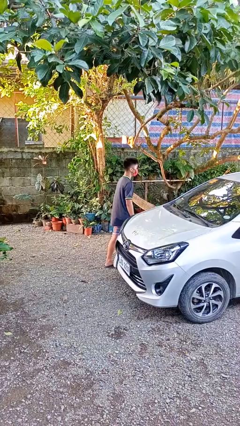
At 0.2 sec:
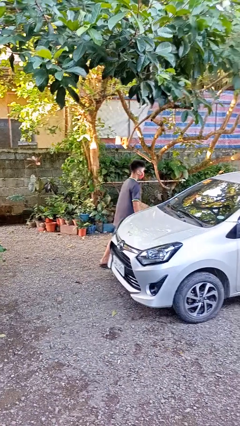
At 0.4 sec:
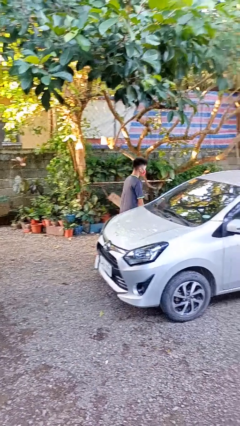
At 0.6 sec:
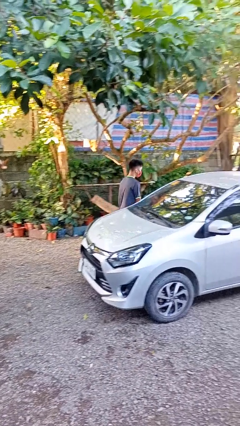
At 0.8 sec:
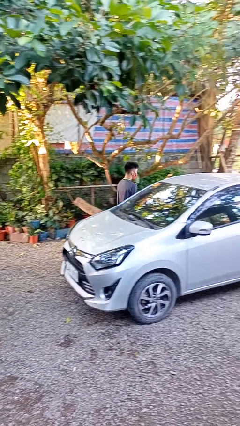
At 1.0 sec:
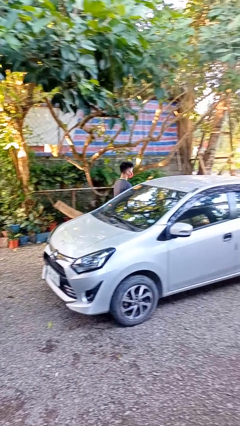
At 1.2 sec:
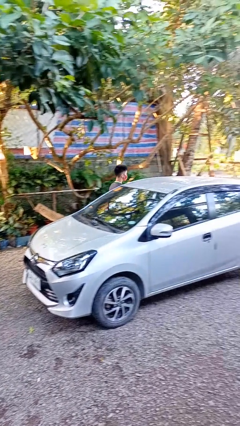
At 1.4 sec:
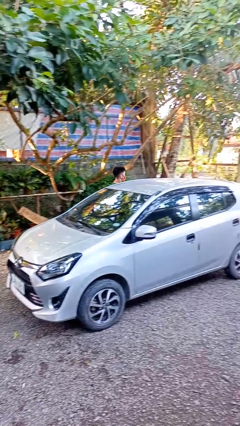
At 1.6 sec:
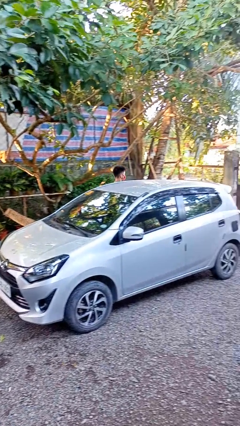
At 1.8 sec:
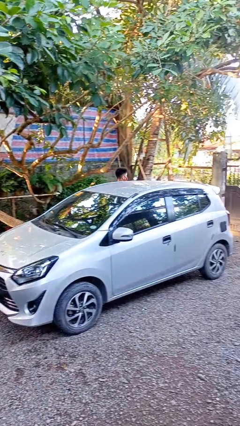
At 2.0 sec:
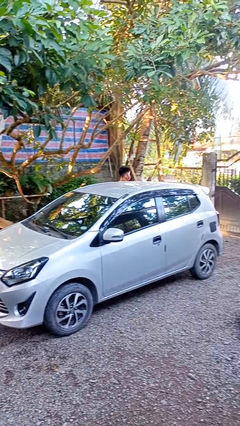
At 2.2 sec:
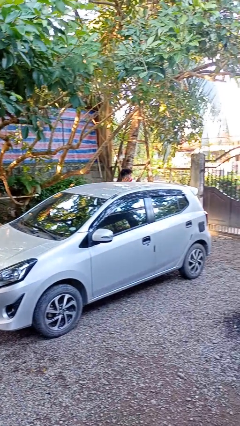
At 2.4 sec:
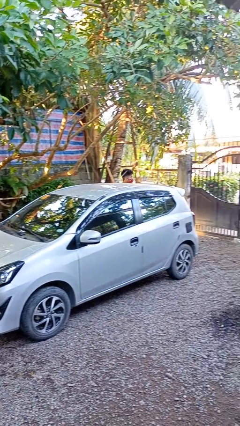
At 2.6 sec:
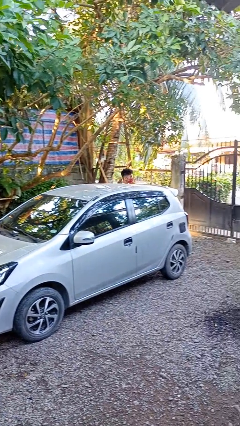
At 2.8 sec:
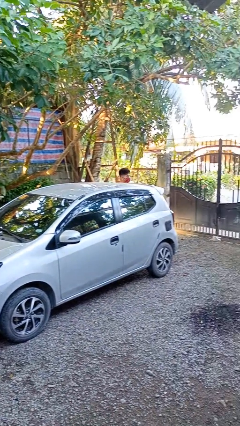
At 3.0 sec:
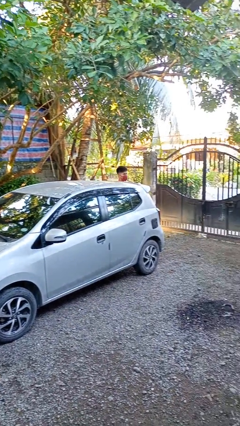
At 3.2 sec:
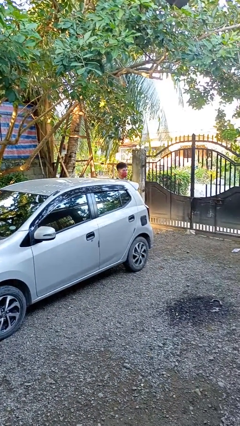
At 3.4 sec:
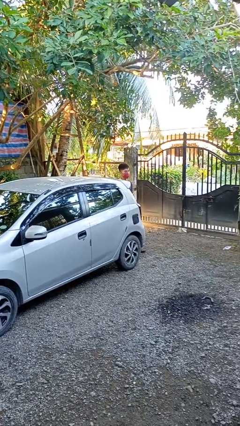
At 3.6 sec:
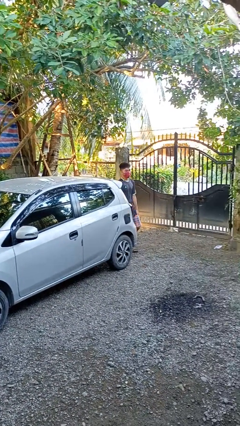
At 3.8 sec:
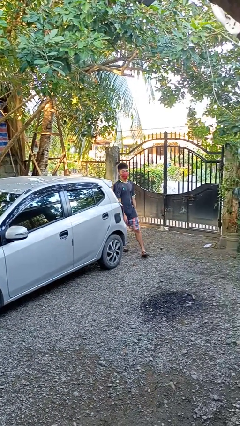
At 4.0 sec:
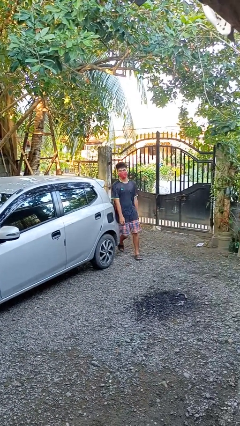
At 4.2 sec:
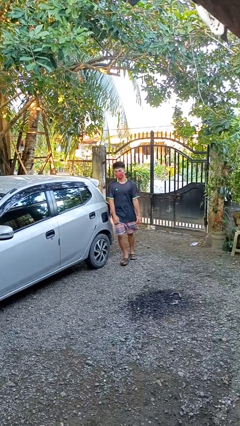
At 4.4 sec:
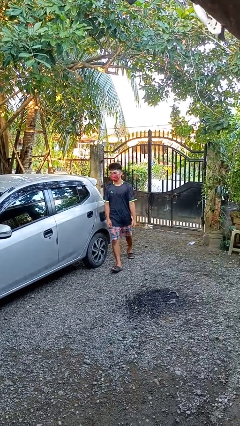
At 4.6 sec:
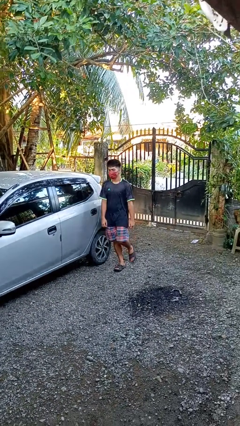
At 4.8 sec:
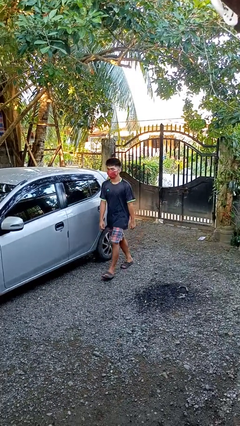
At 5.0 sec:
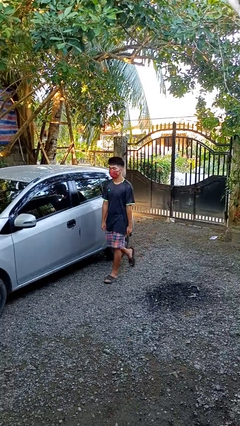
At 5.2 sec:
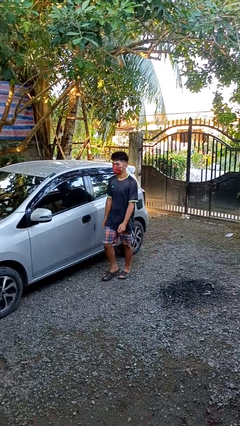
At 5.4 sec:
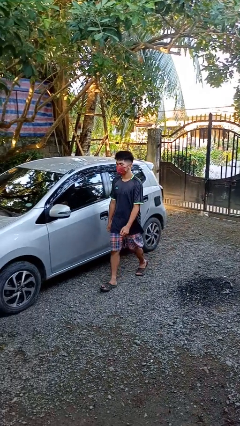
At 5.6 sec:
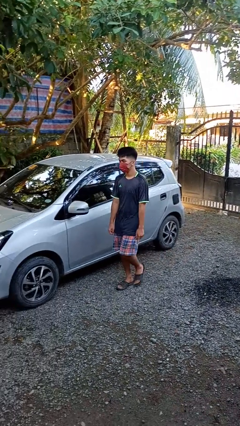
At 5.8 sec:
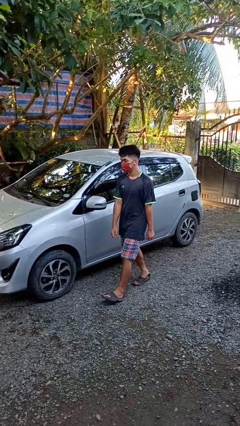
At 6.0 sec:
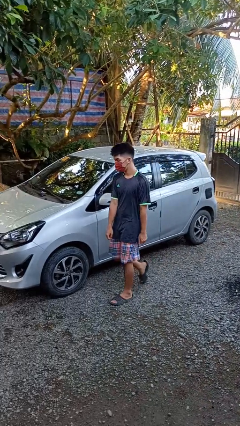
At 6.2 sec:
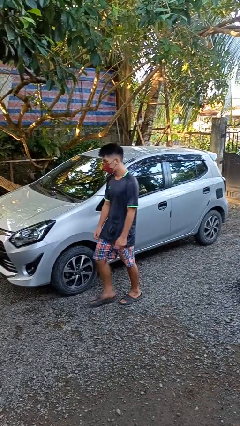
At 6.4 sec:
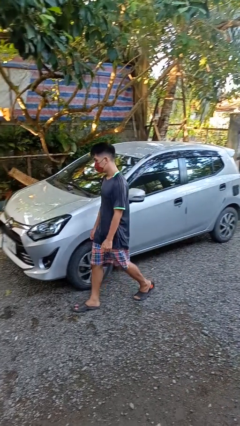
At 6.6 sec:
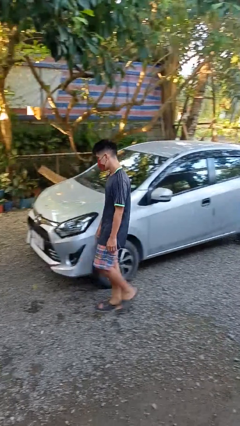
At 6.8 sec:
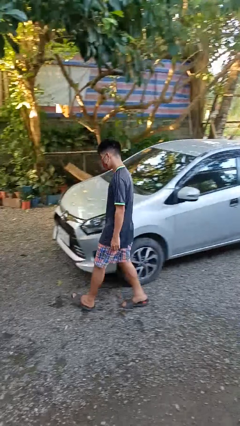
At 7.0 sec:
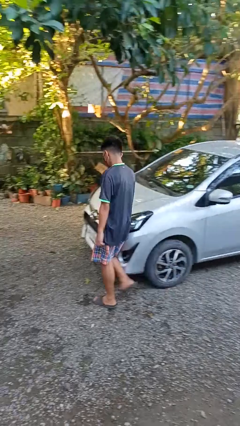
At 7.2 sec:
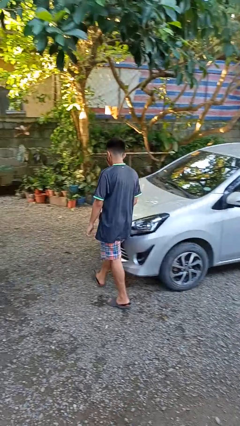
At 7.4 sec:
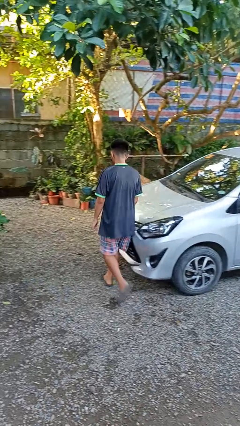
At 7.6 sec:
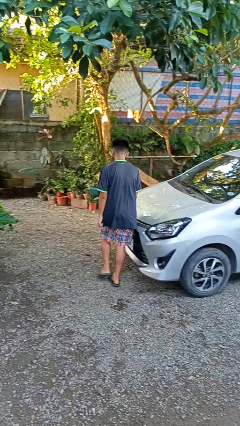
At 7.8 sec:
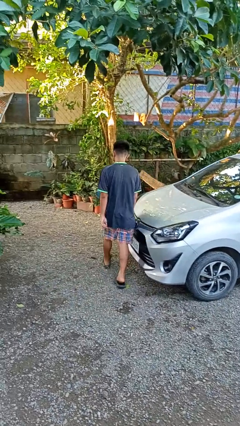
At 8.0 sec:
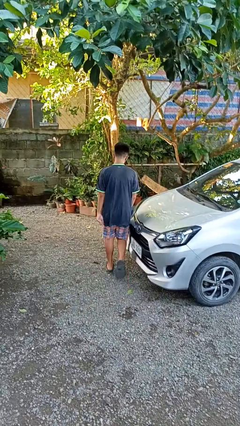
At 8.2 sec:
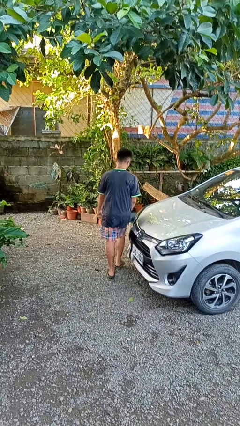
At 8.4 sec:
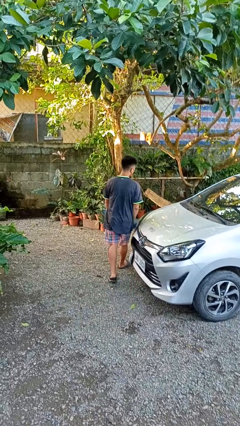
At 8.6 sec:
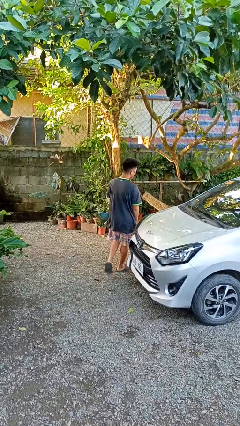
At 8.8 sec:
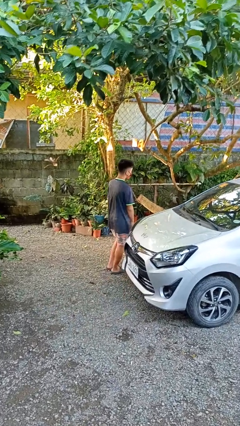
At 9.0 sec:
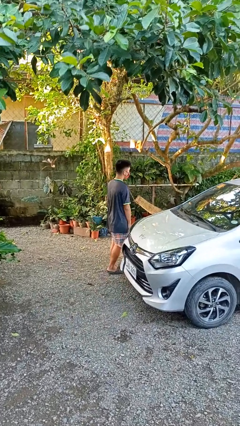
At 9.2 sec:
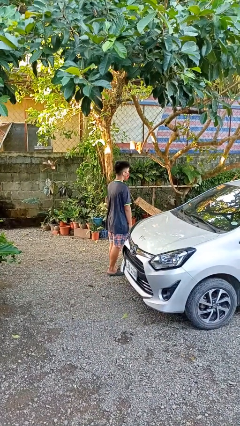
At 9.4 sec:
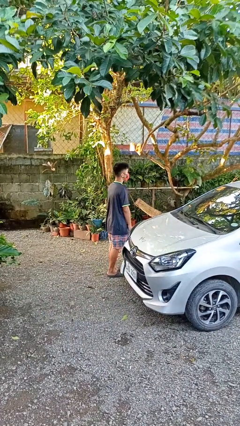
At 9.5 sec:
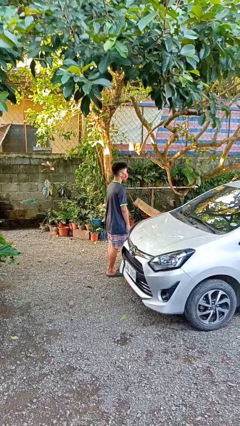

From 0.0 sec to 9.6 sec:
person walks around car

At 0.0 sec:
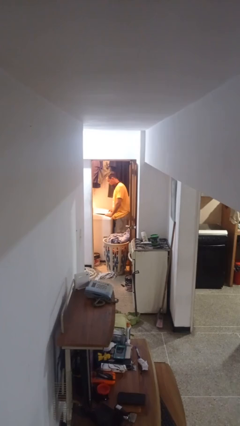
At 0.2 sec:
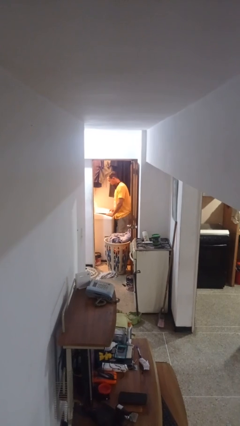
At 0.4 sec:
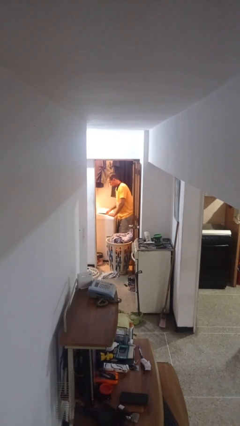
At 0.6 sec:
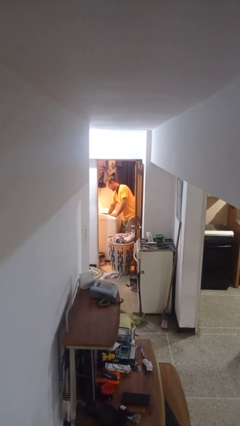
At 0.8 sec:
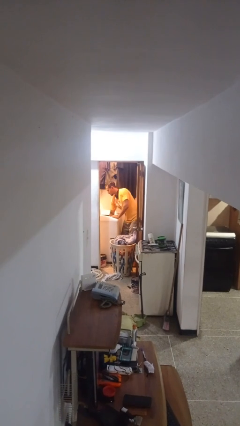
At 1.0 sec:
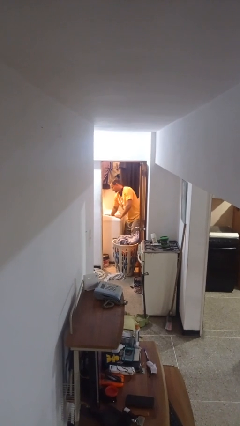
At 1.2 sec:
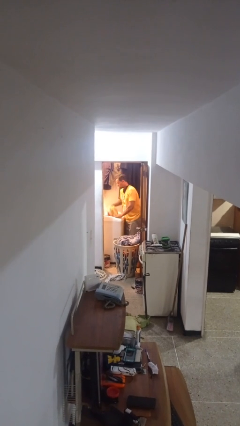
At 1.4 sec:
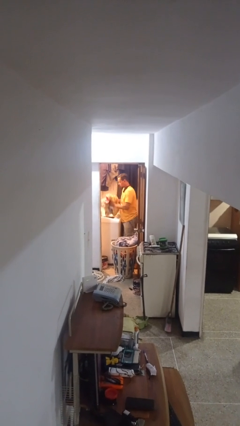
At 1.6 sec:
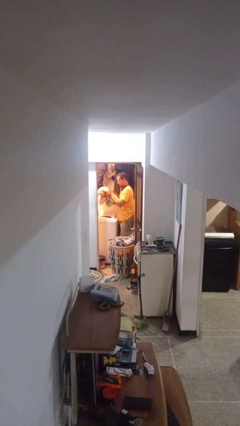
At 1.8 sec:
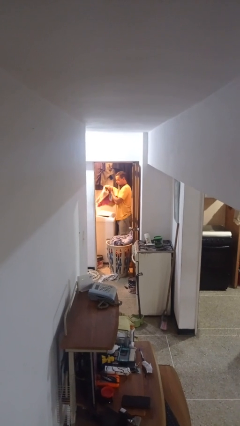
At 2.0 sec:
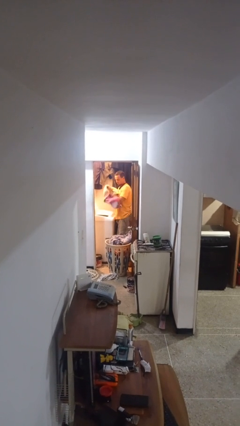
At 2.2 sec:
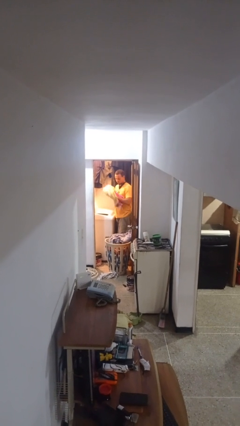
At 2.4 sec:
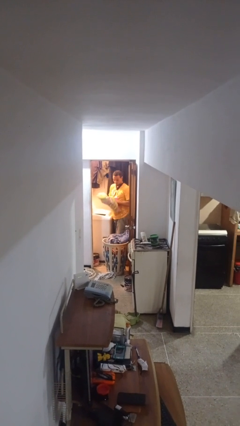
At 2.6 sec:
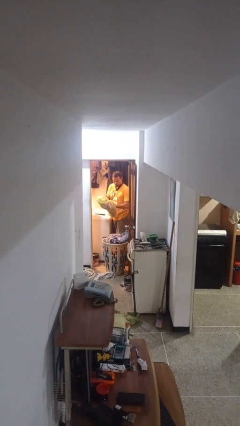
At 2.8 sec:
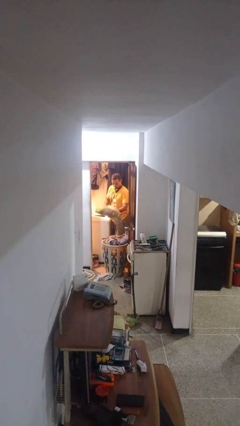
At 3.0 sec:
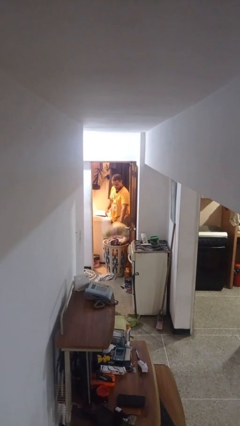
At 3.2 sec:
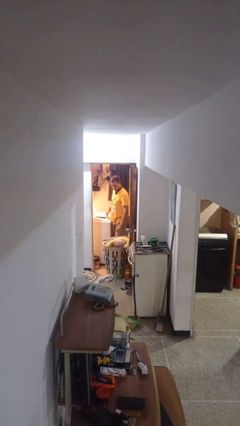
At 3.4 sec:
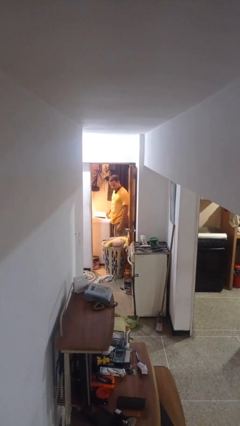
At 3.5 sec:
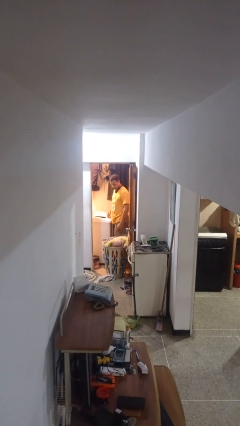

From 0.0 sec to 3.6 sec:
person loads clotheswasher

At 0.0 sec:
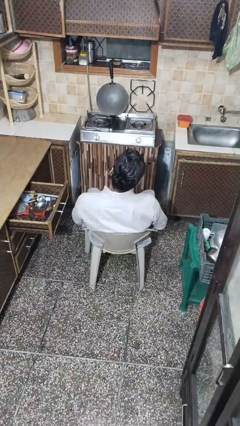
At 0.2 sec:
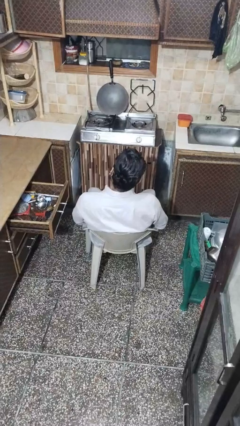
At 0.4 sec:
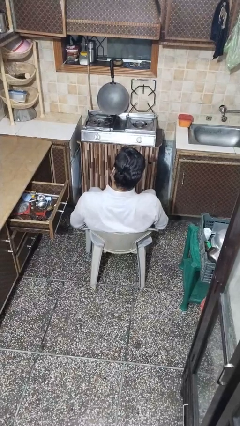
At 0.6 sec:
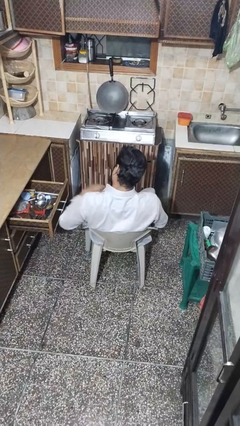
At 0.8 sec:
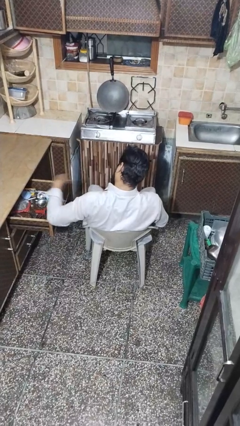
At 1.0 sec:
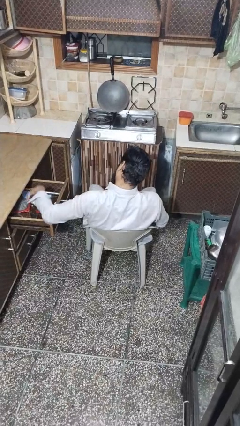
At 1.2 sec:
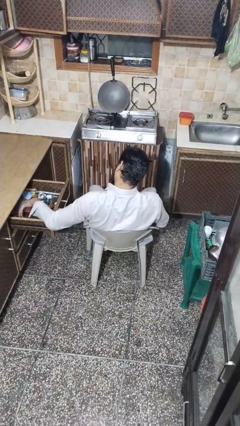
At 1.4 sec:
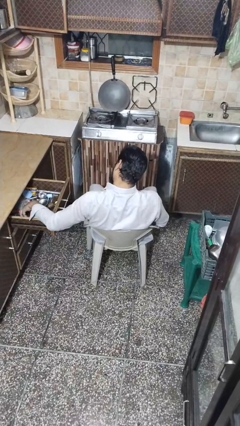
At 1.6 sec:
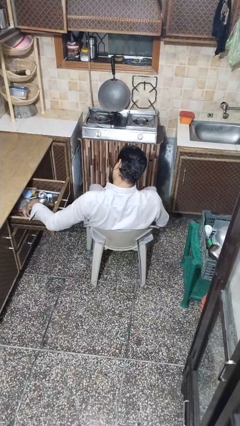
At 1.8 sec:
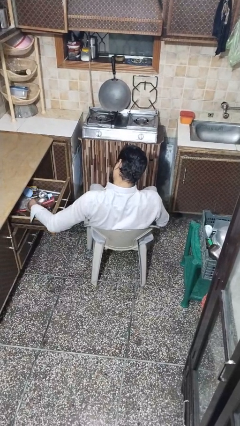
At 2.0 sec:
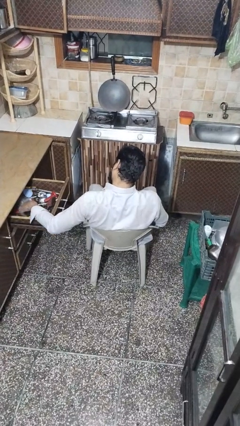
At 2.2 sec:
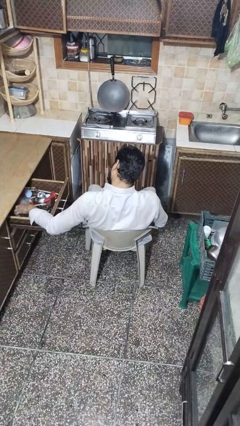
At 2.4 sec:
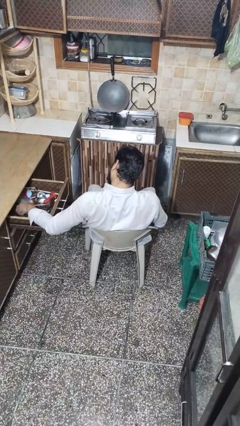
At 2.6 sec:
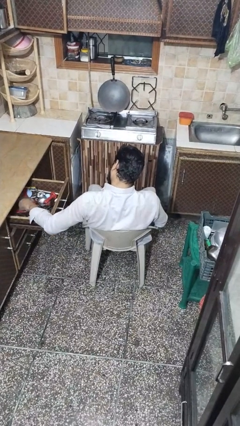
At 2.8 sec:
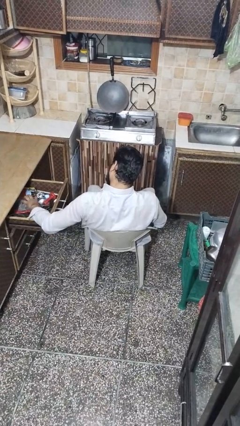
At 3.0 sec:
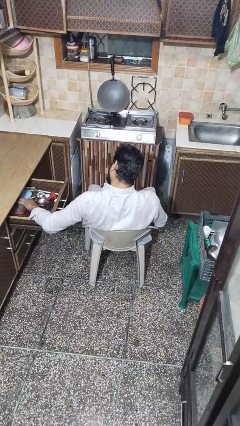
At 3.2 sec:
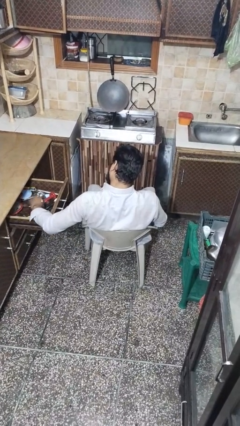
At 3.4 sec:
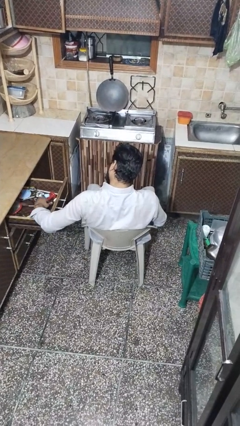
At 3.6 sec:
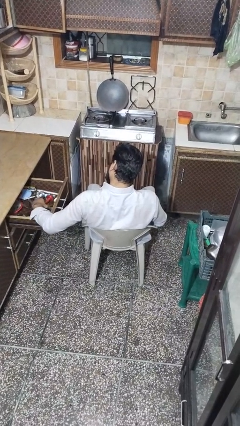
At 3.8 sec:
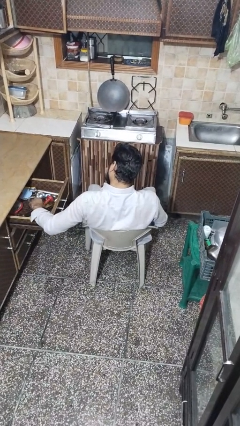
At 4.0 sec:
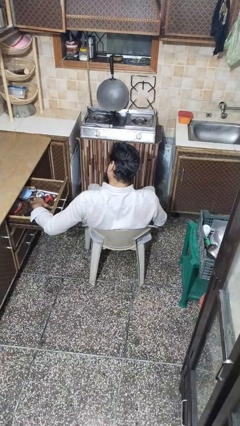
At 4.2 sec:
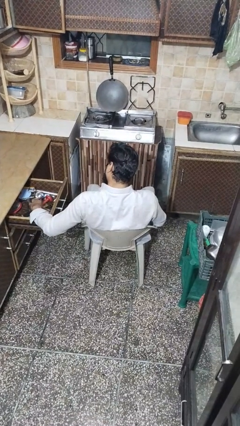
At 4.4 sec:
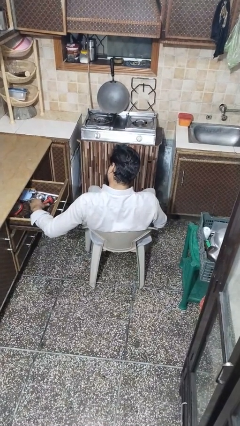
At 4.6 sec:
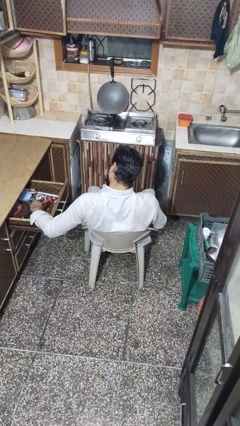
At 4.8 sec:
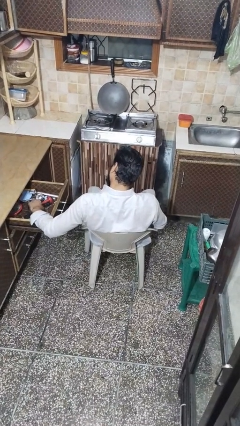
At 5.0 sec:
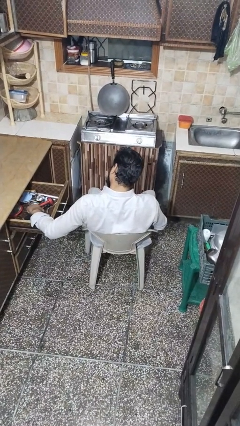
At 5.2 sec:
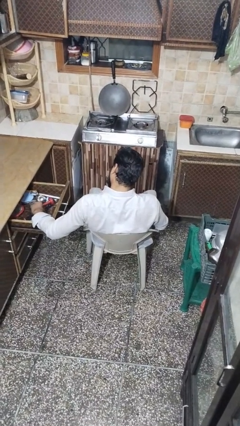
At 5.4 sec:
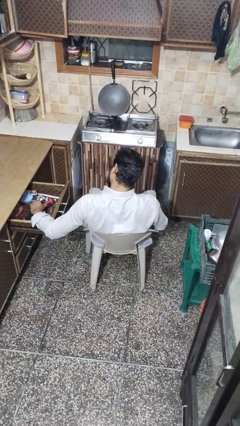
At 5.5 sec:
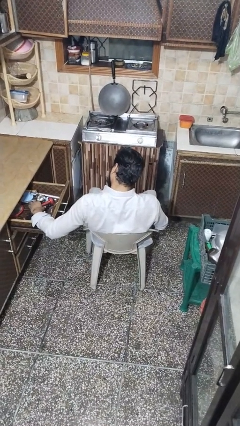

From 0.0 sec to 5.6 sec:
person searches in kitchen drawer
